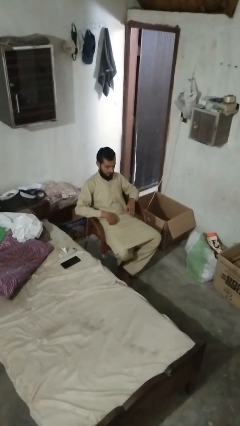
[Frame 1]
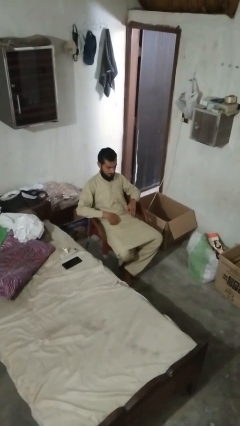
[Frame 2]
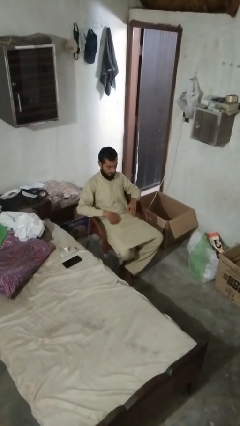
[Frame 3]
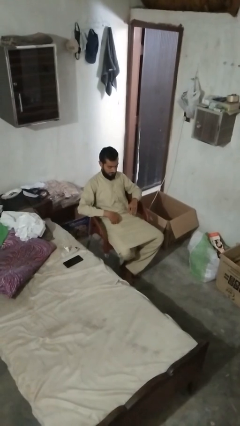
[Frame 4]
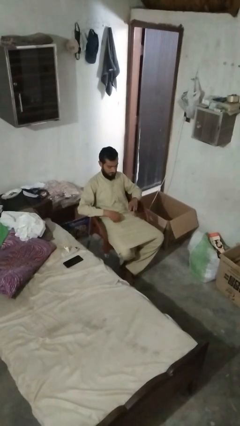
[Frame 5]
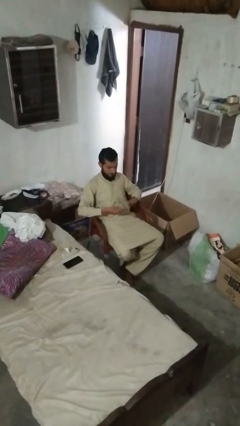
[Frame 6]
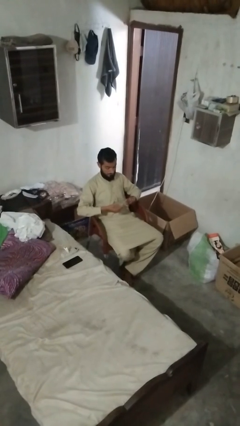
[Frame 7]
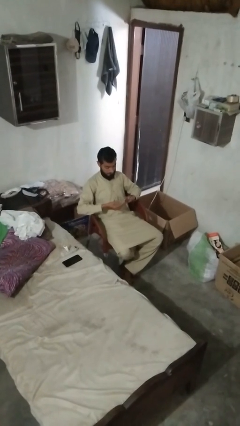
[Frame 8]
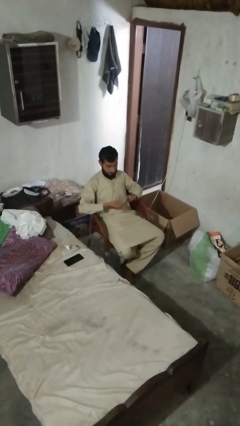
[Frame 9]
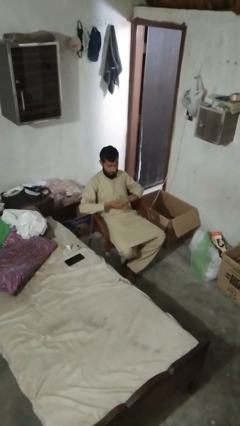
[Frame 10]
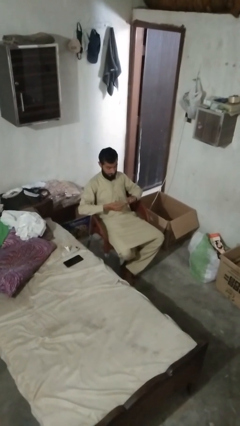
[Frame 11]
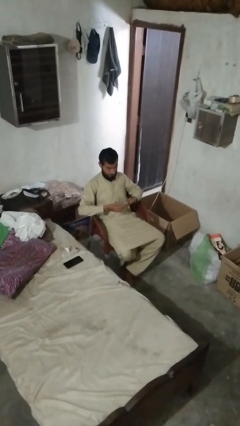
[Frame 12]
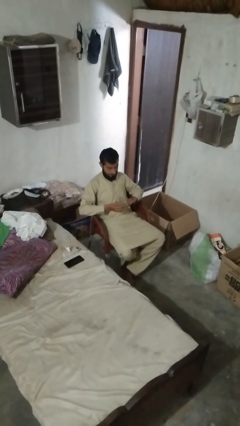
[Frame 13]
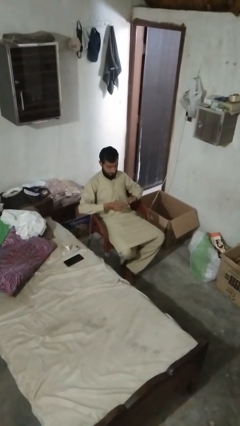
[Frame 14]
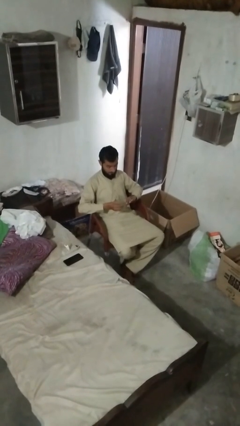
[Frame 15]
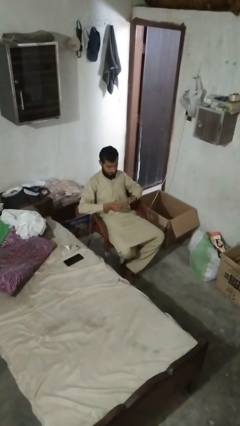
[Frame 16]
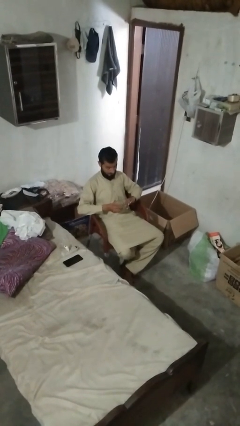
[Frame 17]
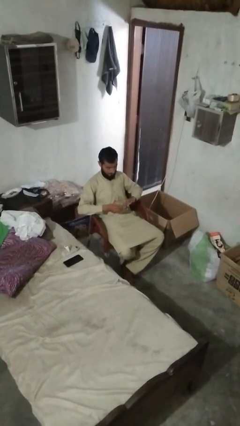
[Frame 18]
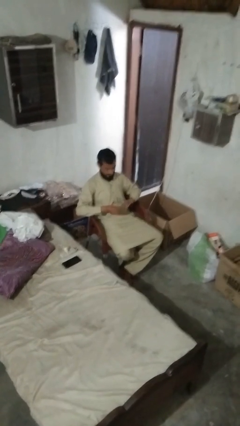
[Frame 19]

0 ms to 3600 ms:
person clips fingernails

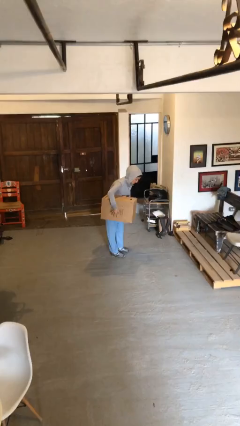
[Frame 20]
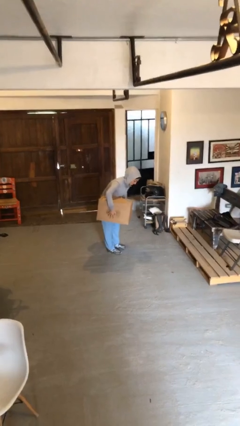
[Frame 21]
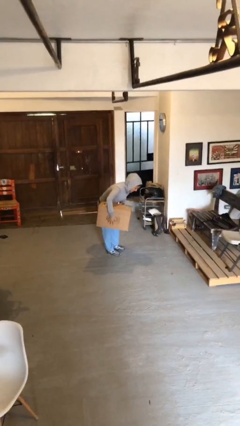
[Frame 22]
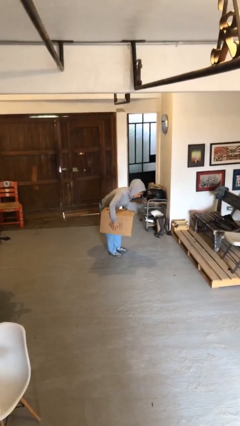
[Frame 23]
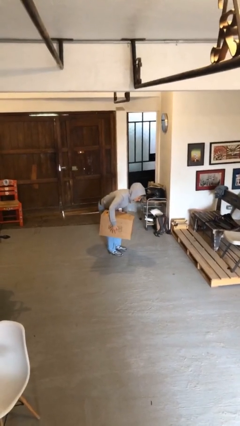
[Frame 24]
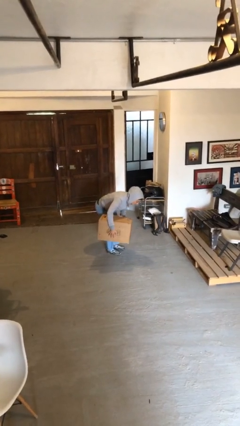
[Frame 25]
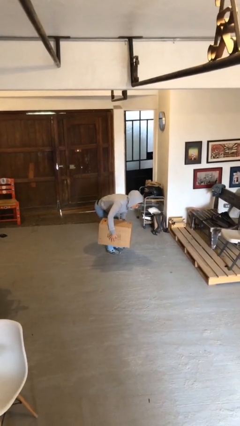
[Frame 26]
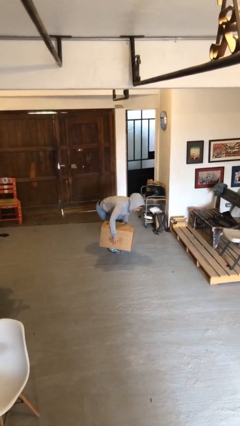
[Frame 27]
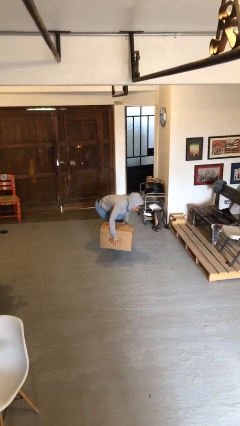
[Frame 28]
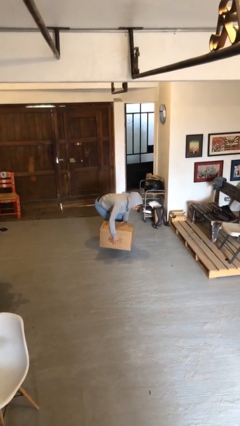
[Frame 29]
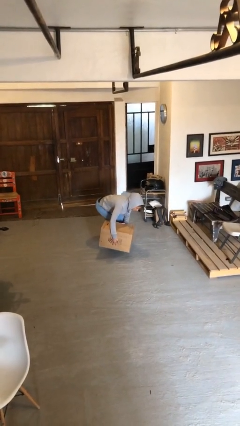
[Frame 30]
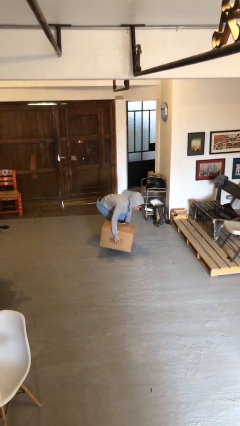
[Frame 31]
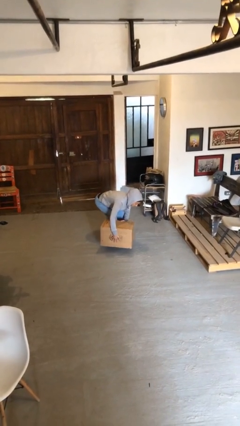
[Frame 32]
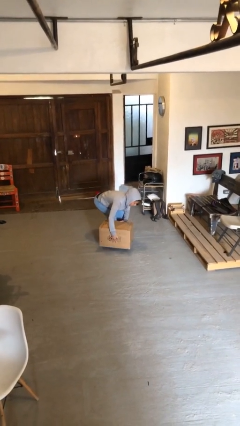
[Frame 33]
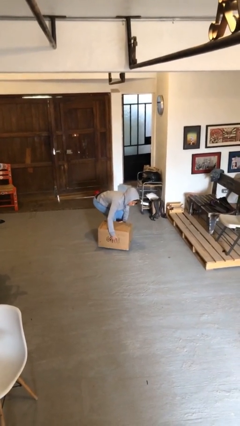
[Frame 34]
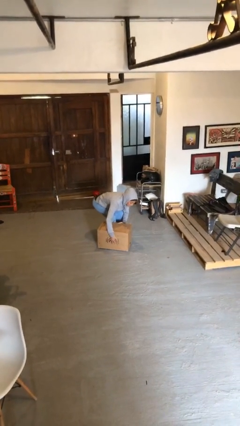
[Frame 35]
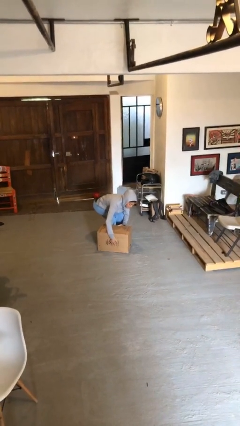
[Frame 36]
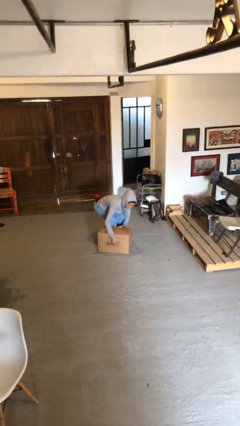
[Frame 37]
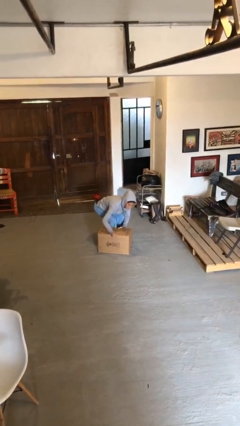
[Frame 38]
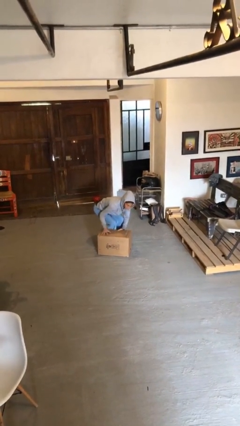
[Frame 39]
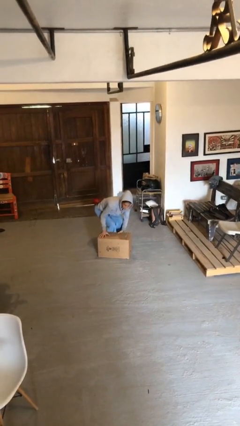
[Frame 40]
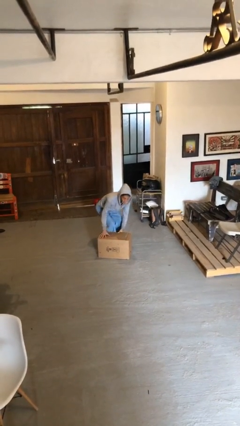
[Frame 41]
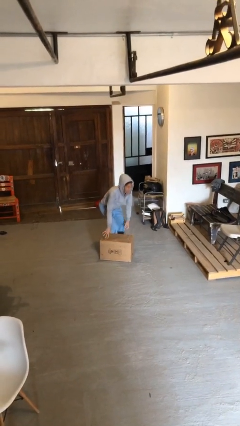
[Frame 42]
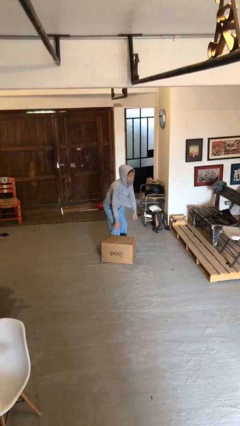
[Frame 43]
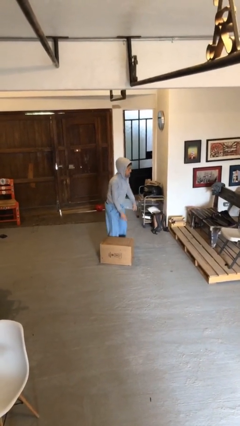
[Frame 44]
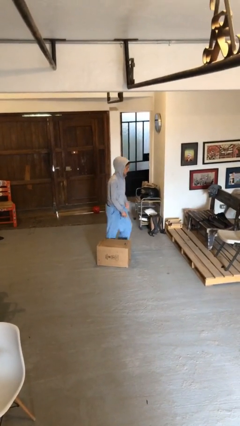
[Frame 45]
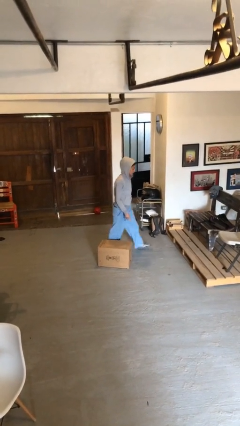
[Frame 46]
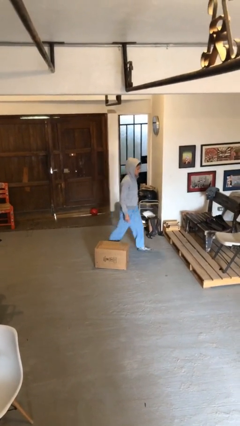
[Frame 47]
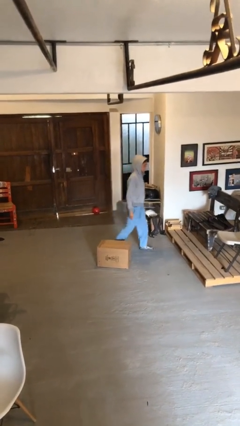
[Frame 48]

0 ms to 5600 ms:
person puts down object on floor

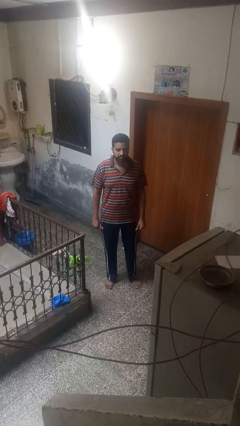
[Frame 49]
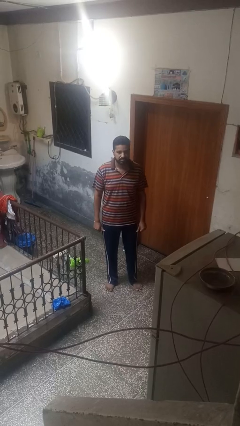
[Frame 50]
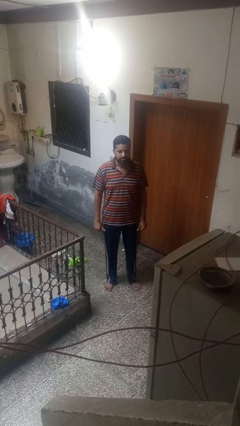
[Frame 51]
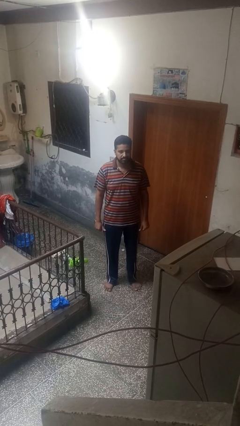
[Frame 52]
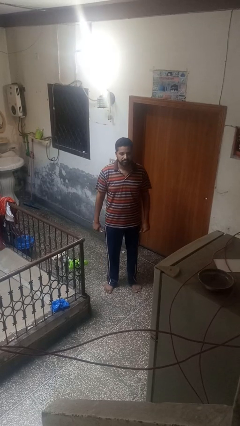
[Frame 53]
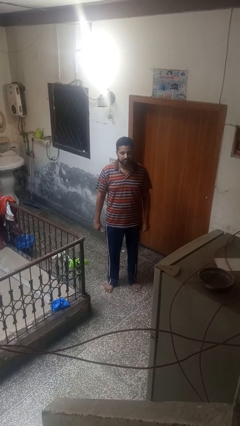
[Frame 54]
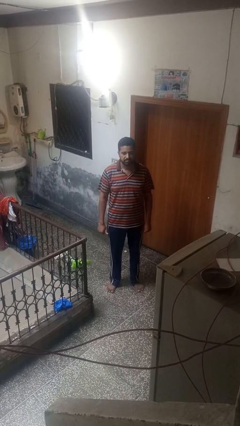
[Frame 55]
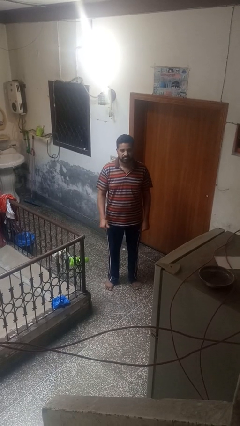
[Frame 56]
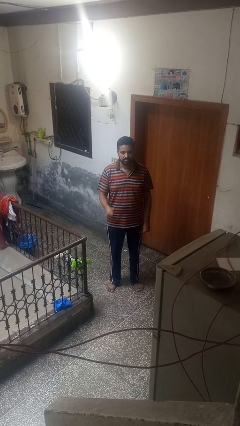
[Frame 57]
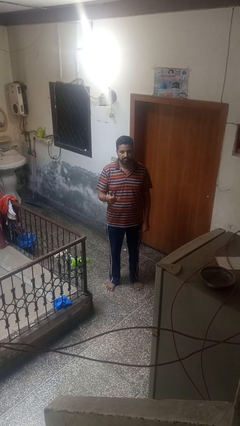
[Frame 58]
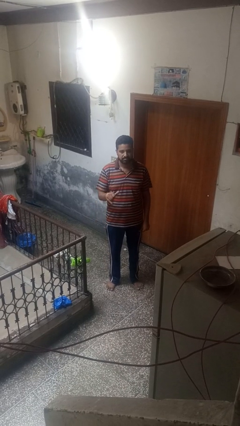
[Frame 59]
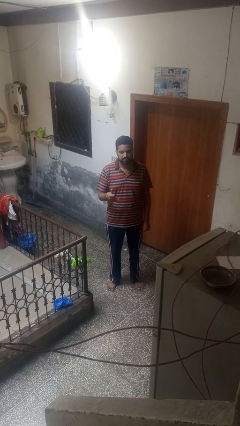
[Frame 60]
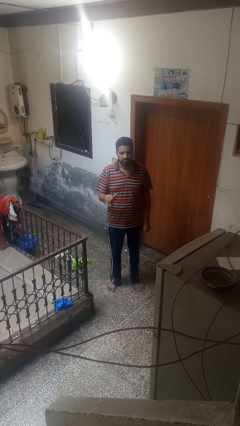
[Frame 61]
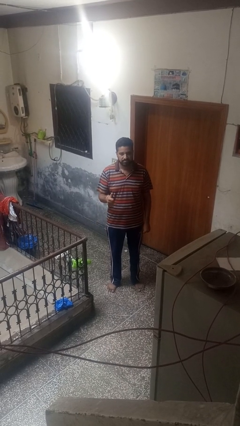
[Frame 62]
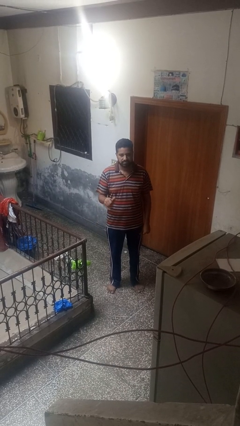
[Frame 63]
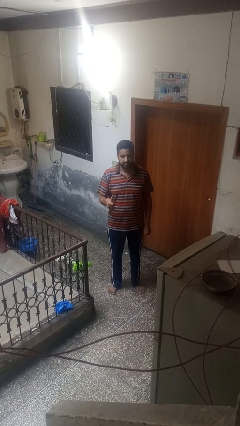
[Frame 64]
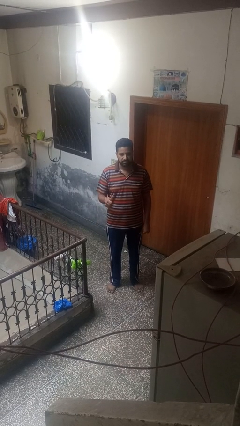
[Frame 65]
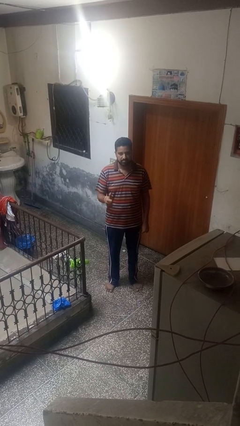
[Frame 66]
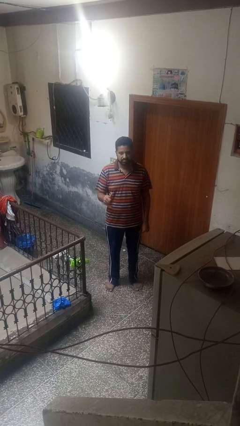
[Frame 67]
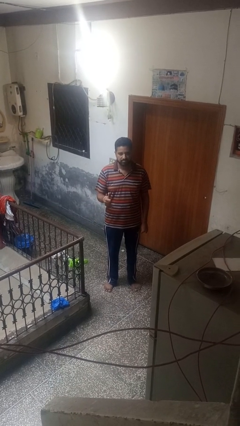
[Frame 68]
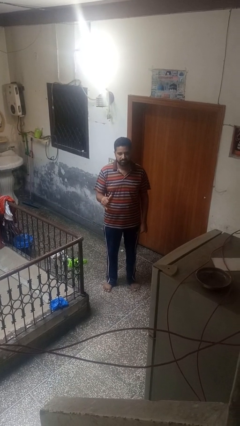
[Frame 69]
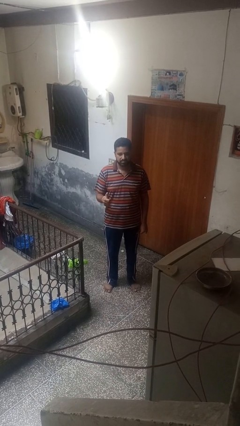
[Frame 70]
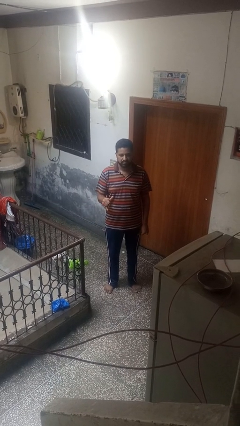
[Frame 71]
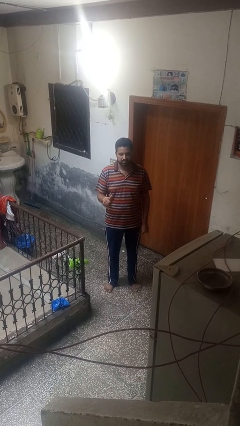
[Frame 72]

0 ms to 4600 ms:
person gestures hang loose

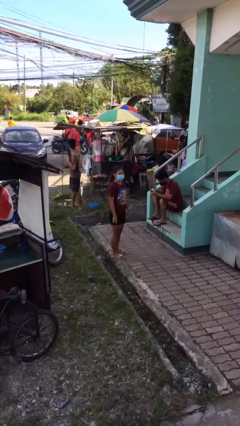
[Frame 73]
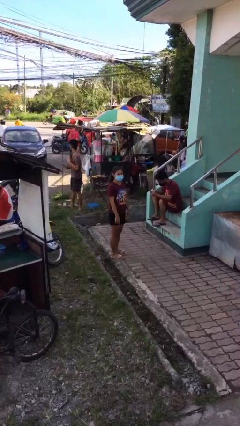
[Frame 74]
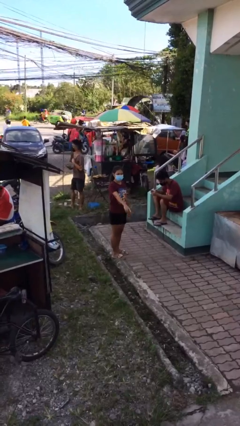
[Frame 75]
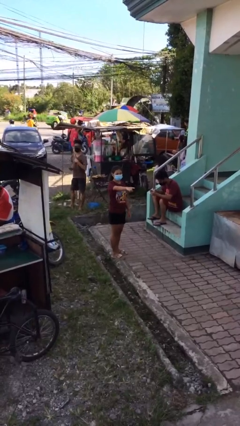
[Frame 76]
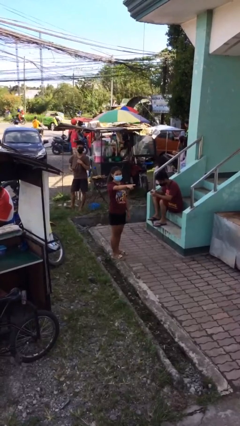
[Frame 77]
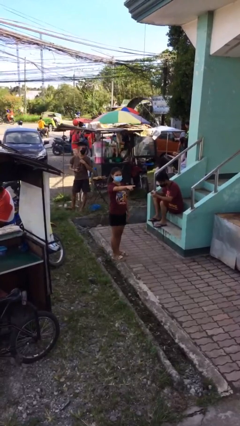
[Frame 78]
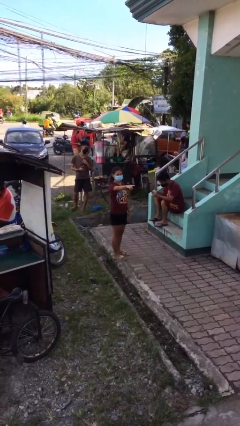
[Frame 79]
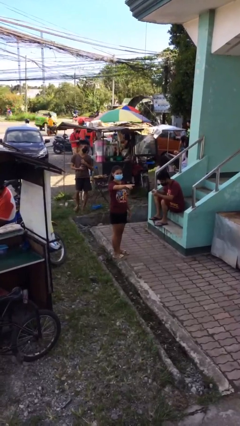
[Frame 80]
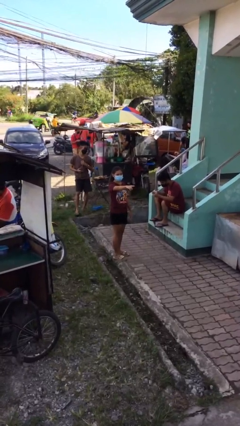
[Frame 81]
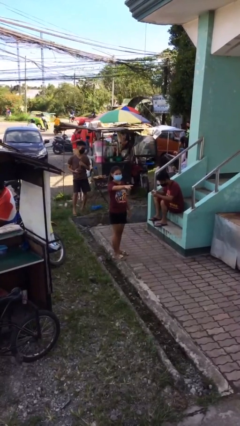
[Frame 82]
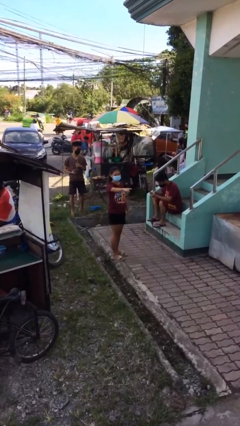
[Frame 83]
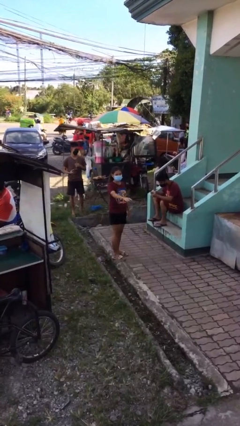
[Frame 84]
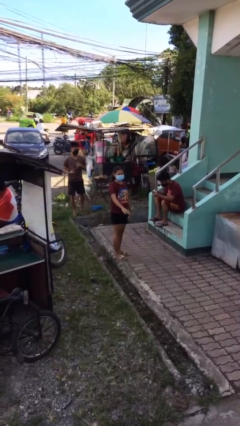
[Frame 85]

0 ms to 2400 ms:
person points at person

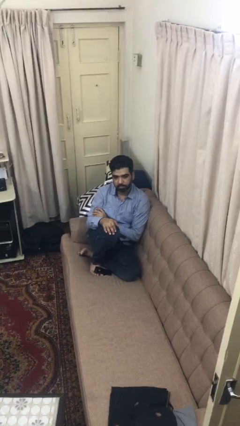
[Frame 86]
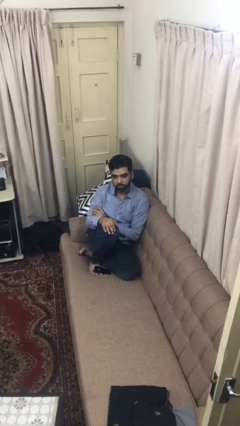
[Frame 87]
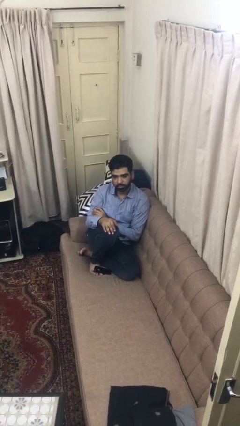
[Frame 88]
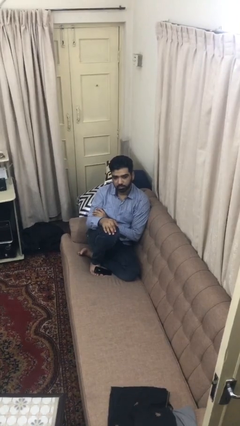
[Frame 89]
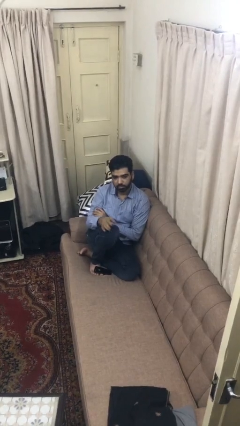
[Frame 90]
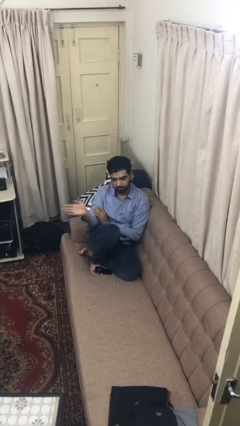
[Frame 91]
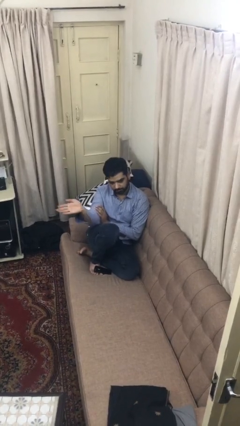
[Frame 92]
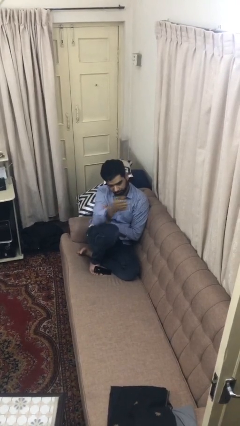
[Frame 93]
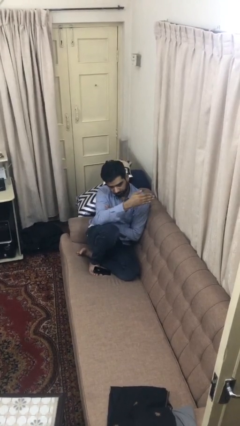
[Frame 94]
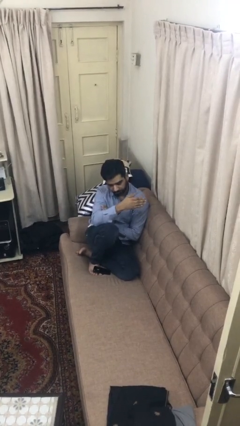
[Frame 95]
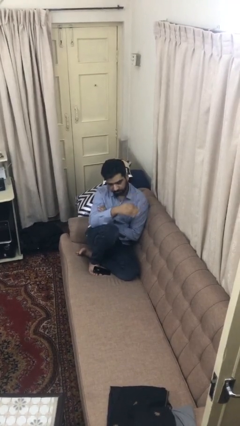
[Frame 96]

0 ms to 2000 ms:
person gestures swipe left
